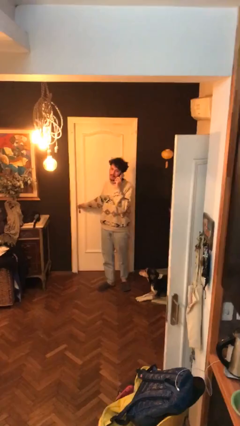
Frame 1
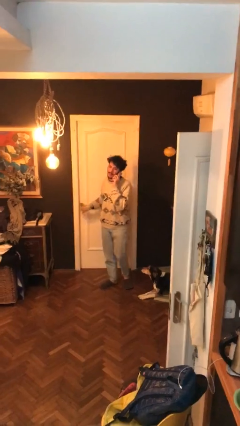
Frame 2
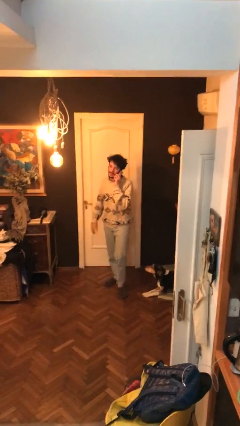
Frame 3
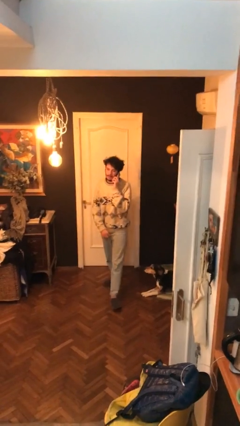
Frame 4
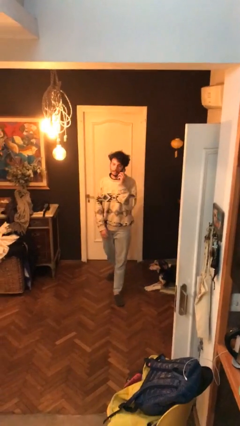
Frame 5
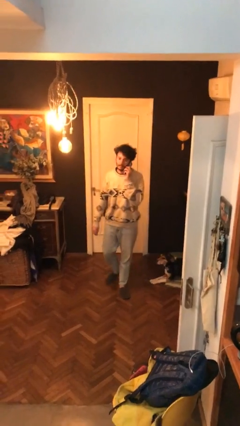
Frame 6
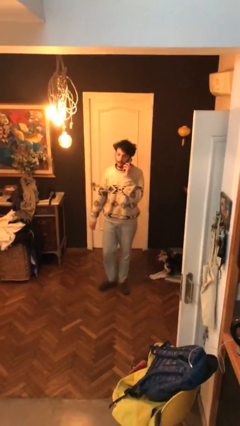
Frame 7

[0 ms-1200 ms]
person closes facility door

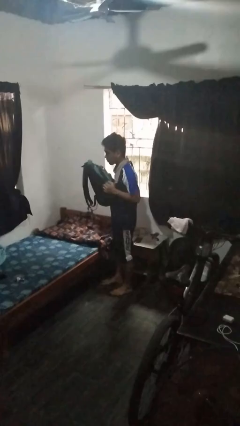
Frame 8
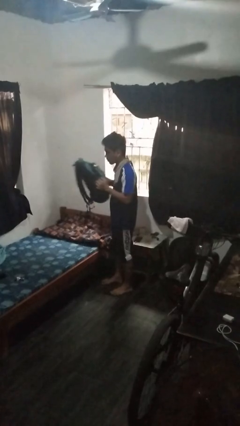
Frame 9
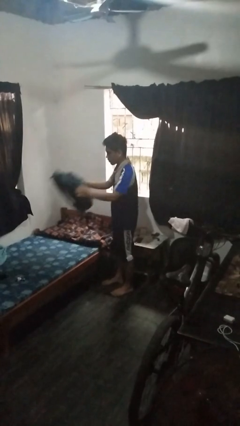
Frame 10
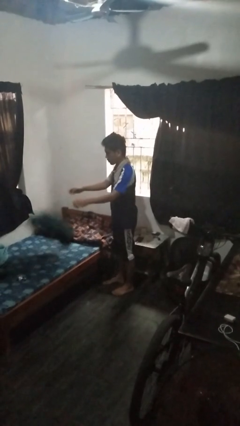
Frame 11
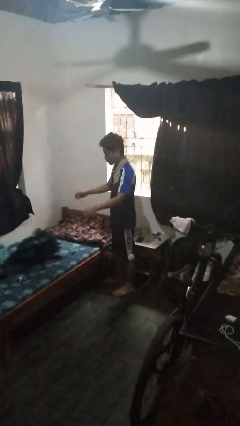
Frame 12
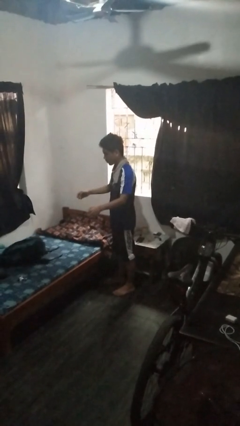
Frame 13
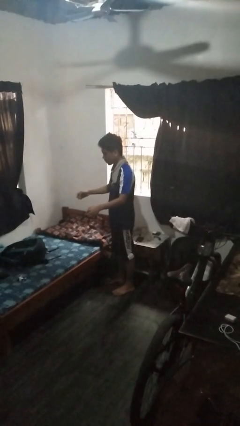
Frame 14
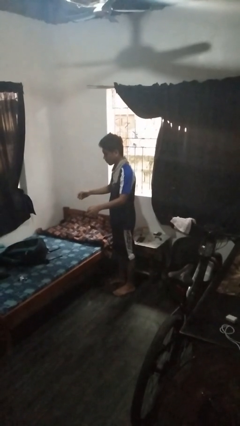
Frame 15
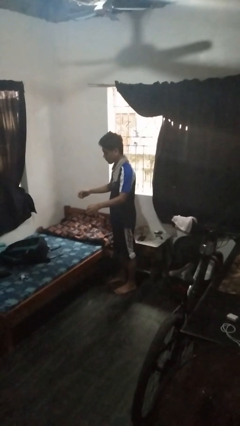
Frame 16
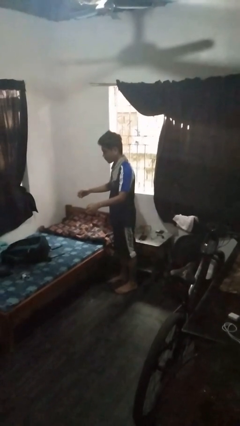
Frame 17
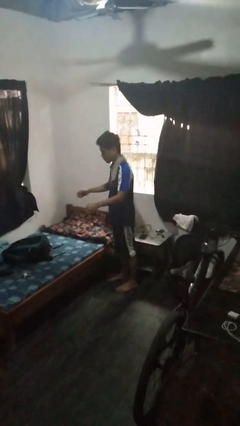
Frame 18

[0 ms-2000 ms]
person throws object on bed

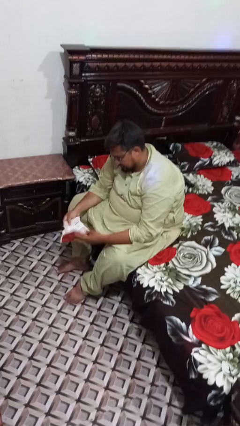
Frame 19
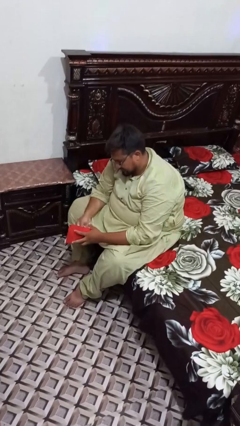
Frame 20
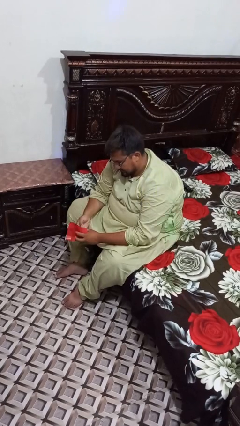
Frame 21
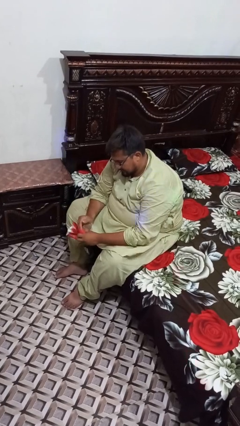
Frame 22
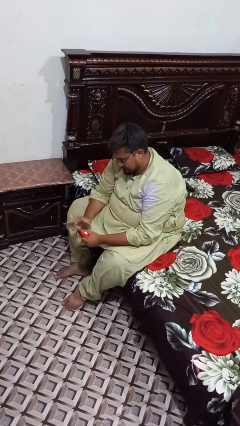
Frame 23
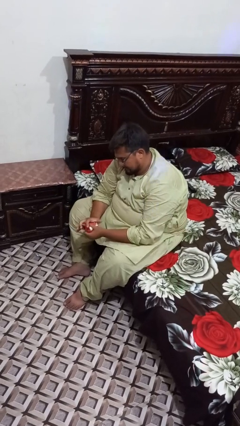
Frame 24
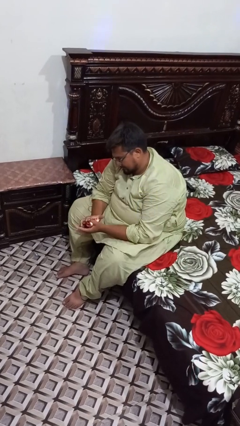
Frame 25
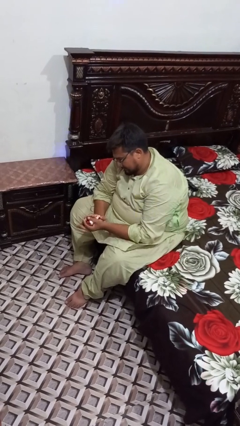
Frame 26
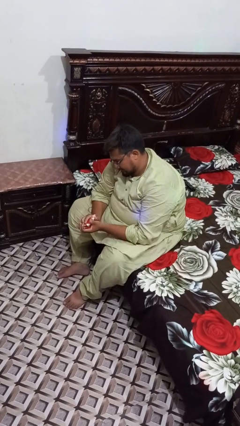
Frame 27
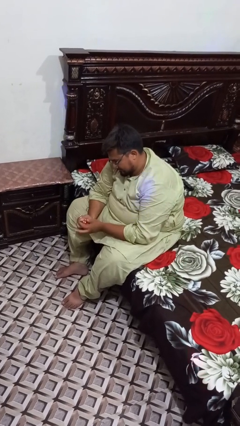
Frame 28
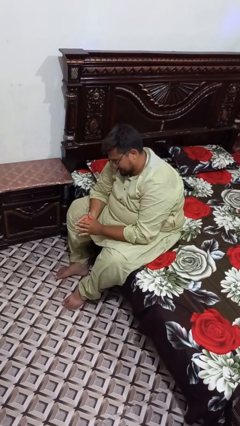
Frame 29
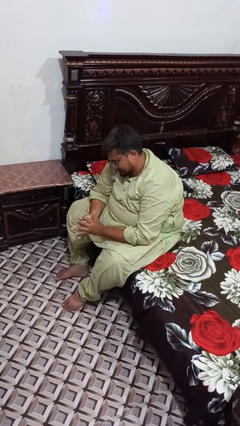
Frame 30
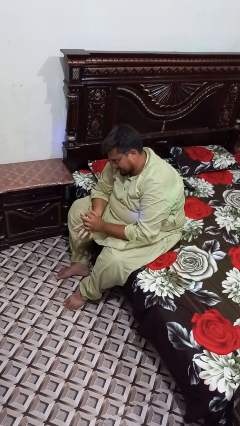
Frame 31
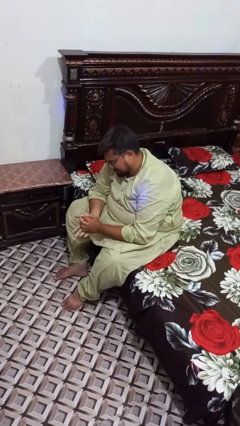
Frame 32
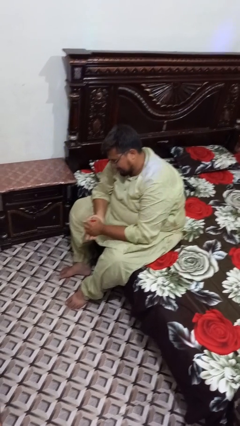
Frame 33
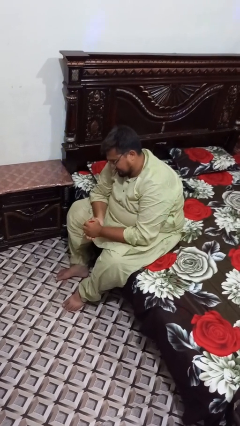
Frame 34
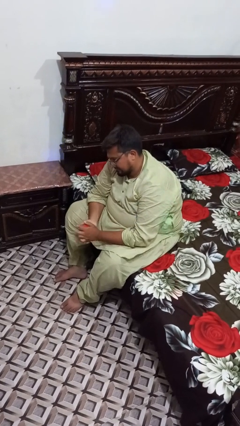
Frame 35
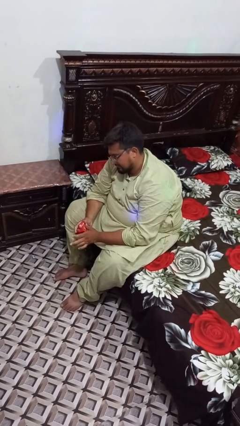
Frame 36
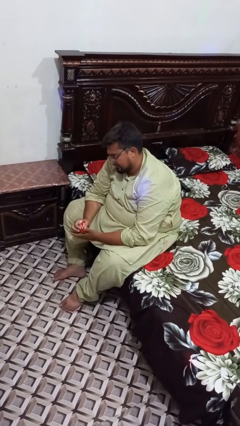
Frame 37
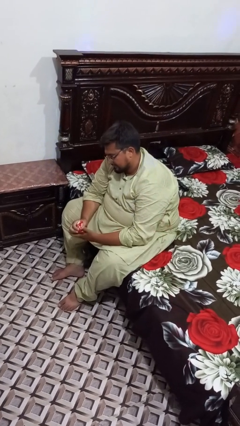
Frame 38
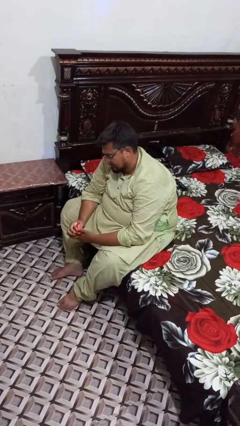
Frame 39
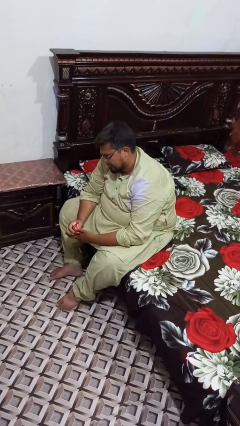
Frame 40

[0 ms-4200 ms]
person crumples paper

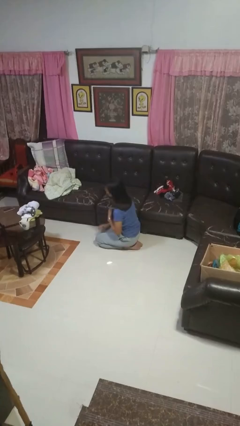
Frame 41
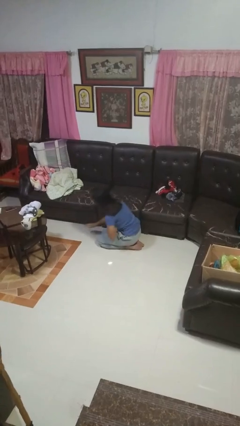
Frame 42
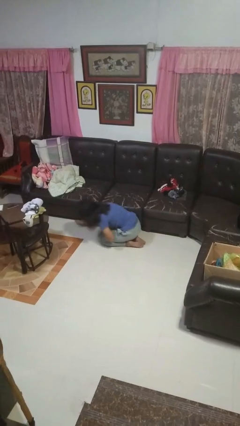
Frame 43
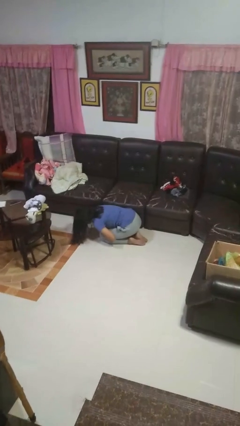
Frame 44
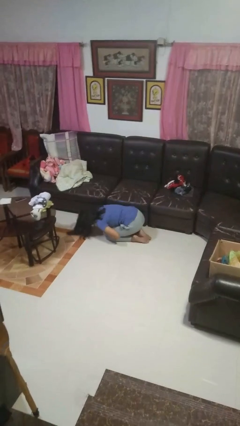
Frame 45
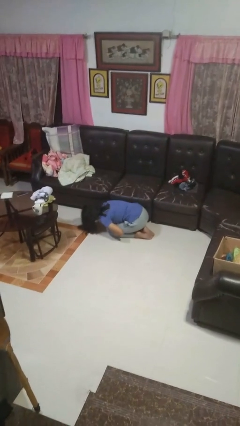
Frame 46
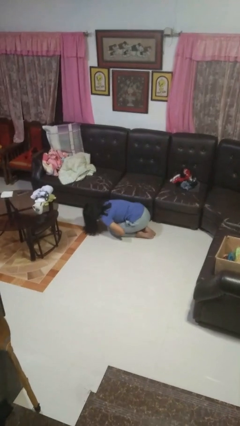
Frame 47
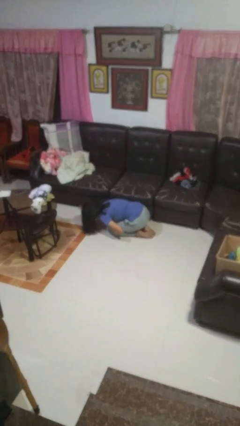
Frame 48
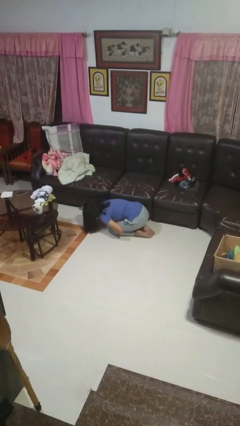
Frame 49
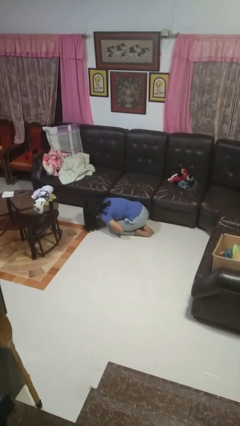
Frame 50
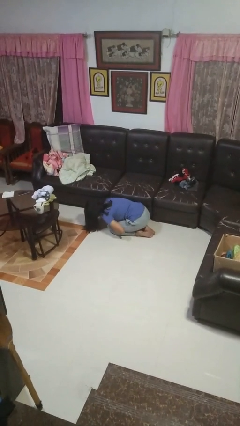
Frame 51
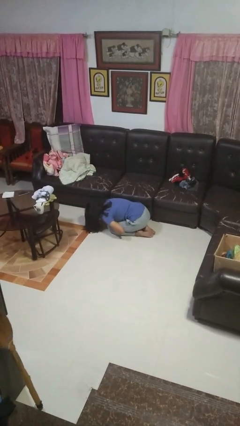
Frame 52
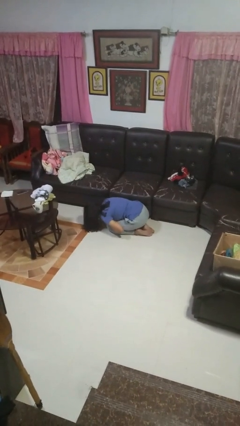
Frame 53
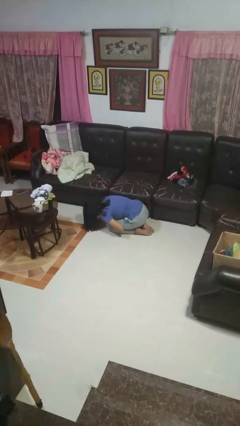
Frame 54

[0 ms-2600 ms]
person searches under couch

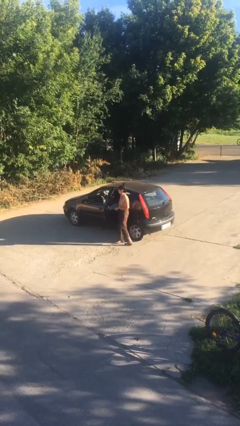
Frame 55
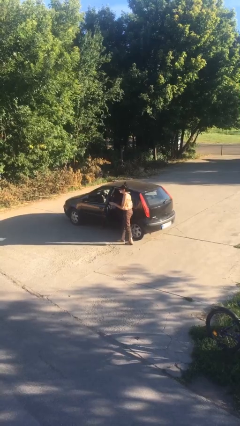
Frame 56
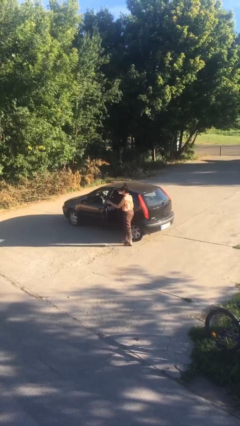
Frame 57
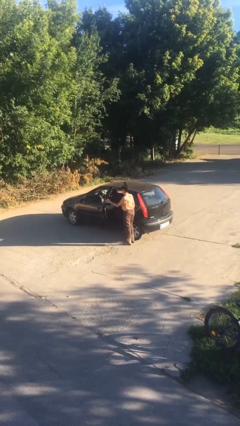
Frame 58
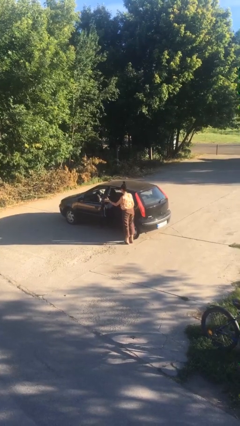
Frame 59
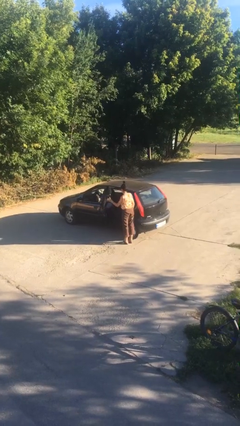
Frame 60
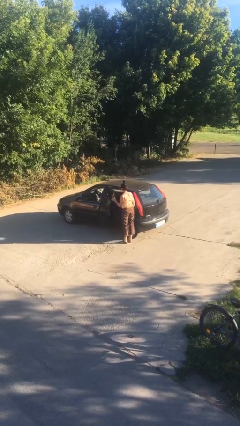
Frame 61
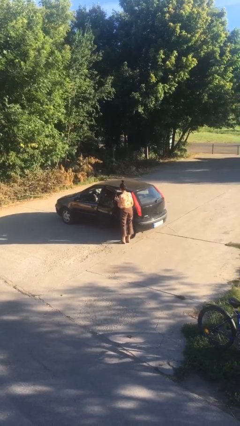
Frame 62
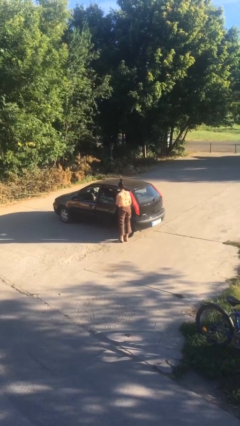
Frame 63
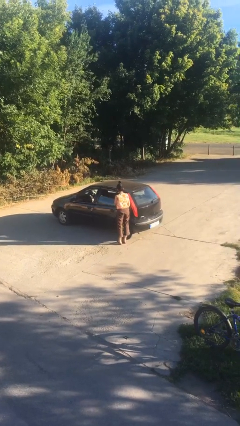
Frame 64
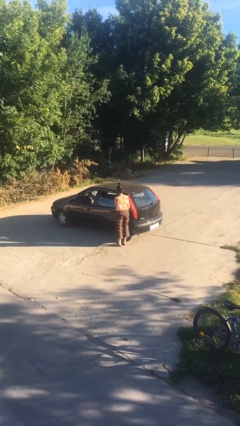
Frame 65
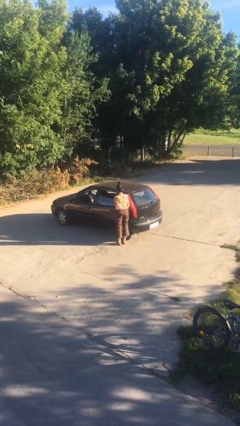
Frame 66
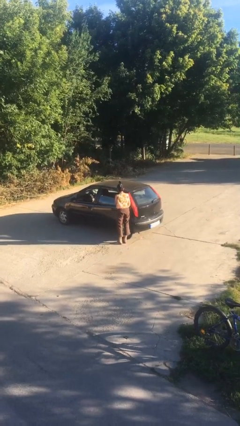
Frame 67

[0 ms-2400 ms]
person closes car door

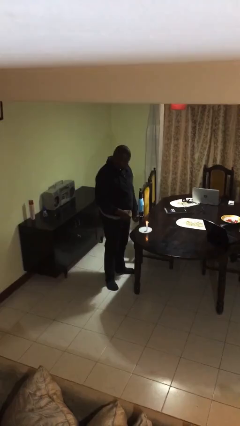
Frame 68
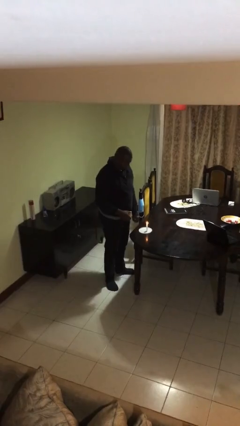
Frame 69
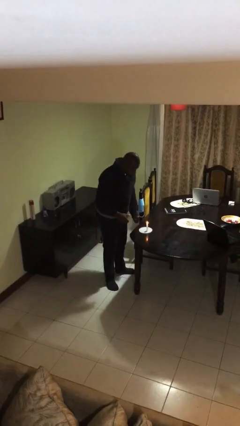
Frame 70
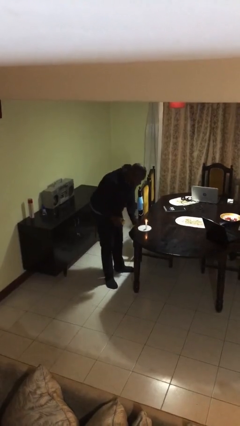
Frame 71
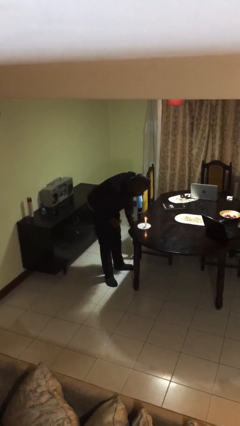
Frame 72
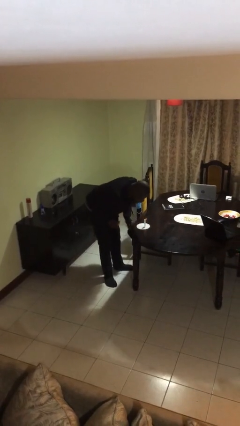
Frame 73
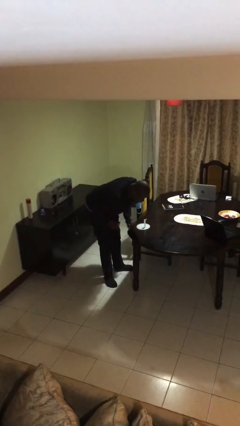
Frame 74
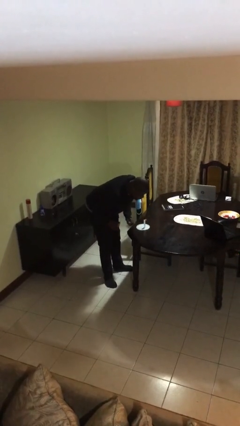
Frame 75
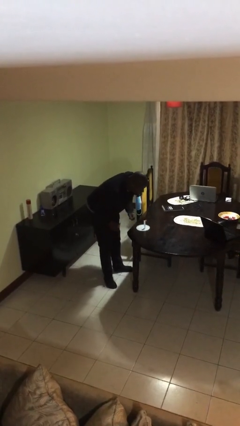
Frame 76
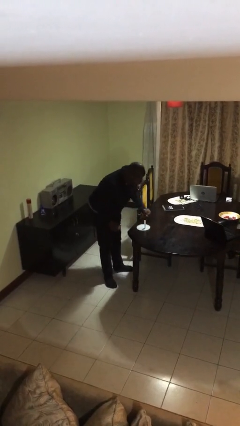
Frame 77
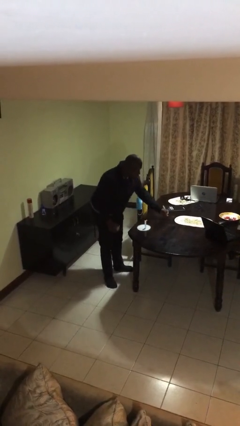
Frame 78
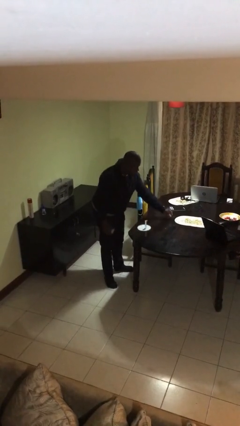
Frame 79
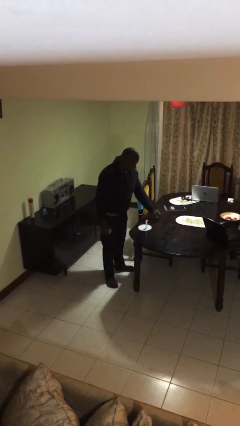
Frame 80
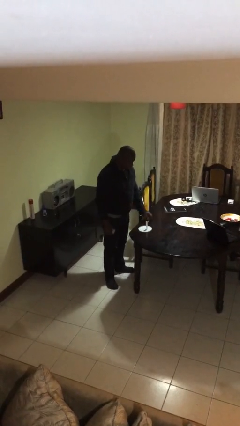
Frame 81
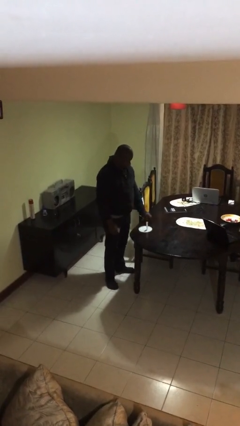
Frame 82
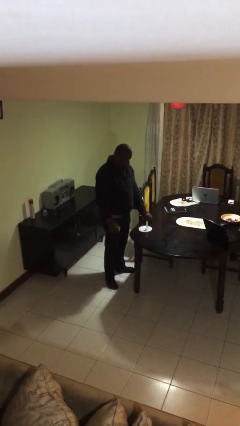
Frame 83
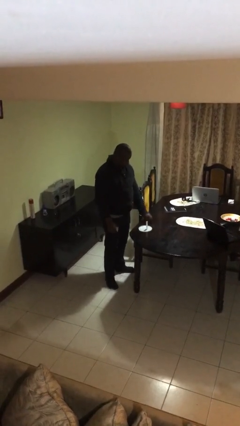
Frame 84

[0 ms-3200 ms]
person extinguishes candle

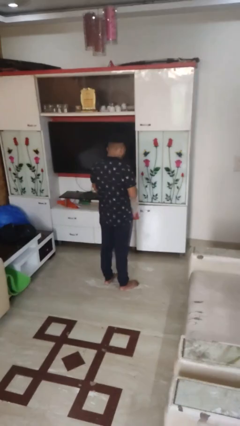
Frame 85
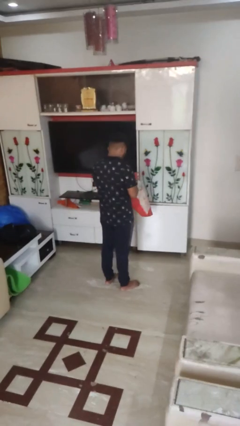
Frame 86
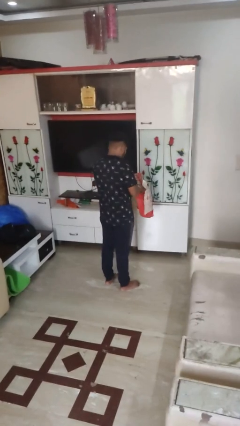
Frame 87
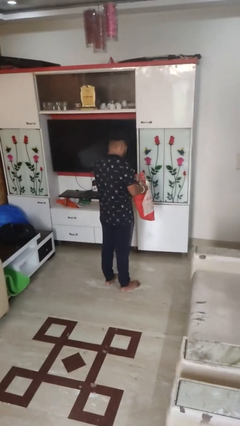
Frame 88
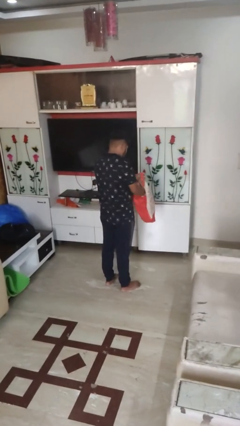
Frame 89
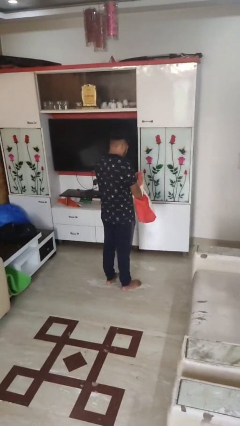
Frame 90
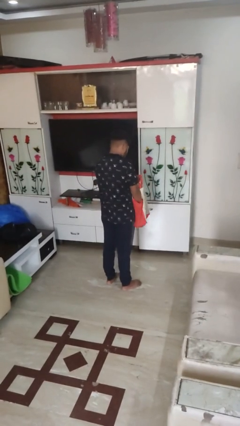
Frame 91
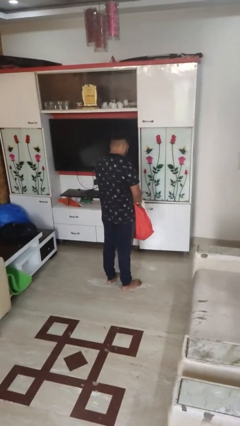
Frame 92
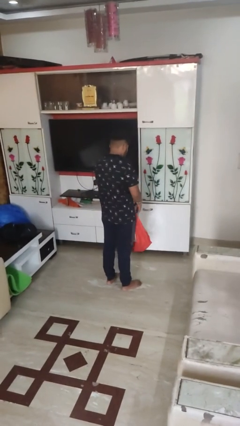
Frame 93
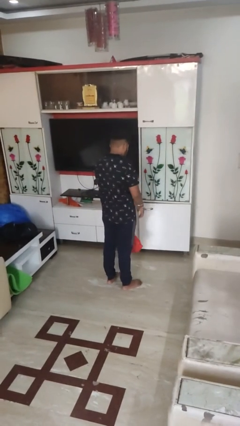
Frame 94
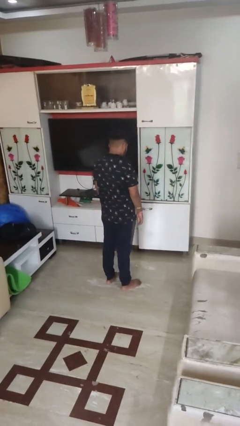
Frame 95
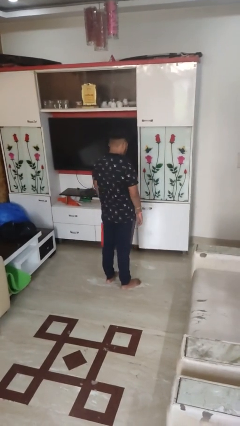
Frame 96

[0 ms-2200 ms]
person searches in bag
